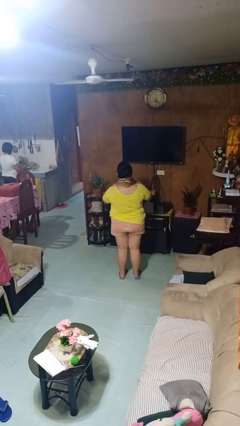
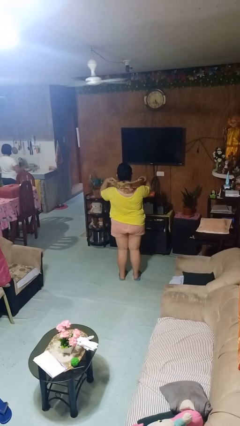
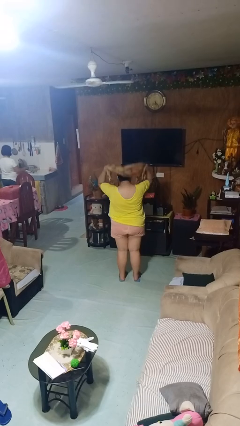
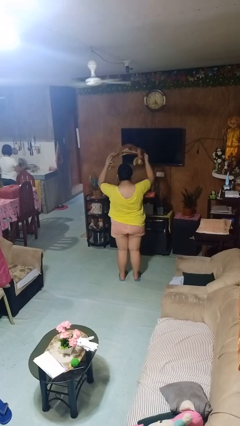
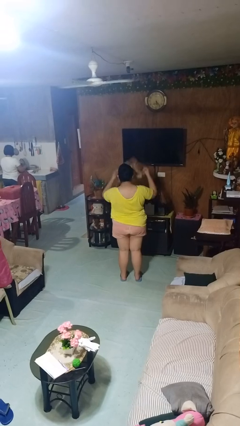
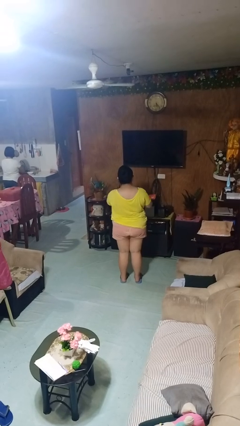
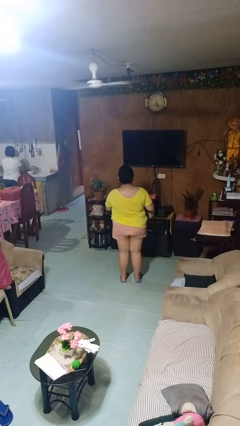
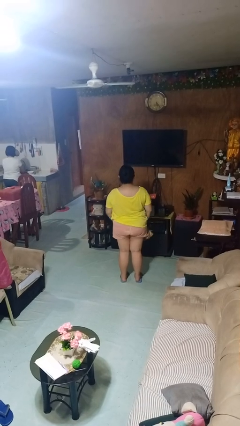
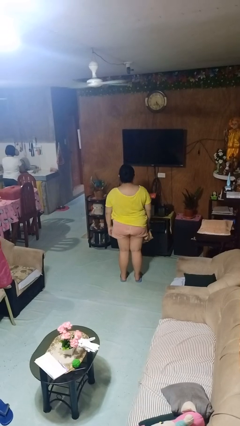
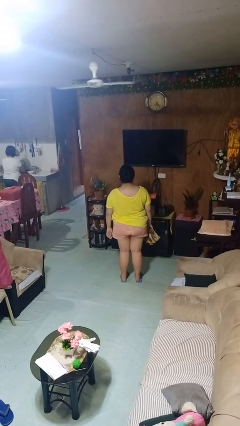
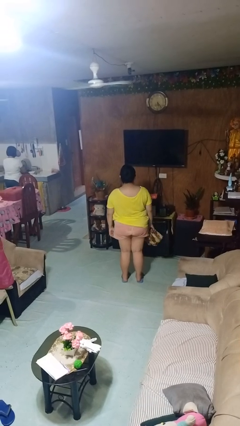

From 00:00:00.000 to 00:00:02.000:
person takes off scarf

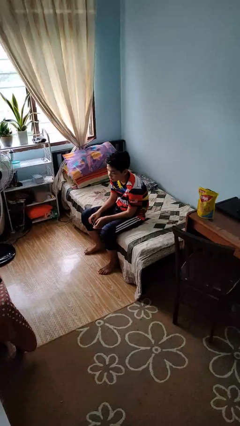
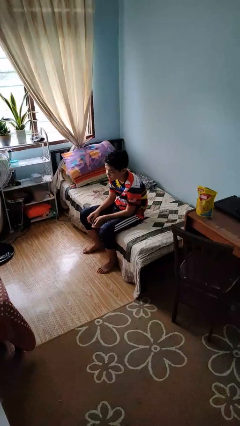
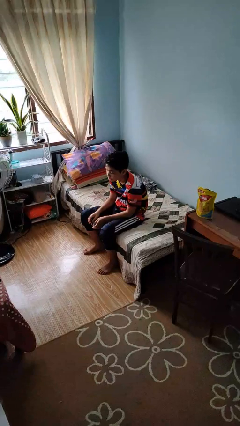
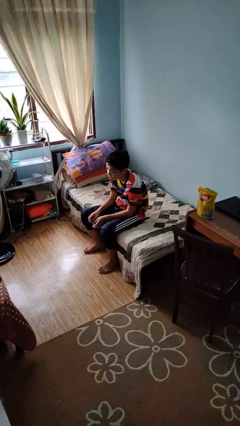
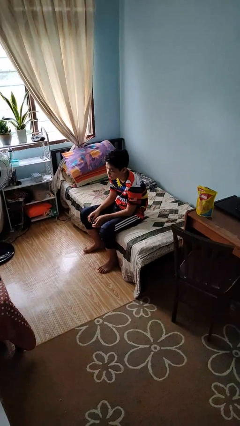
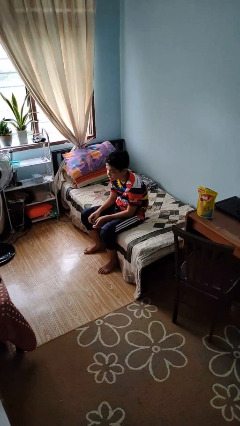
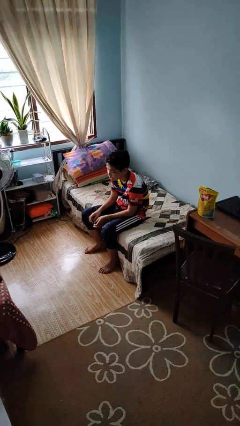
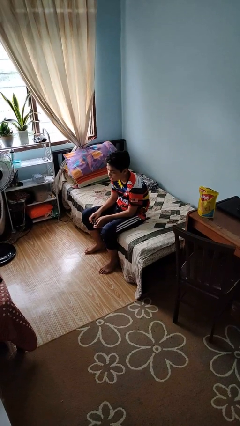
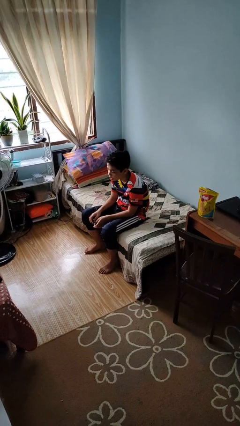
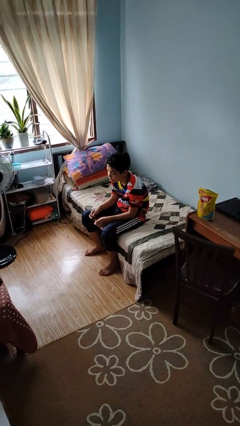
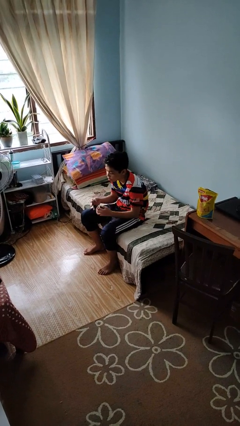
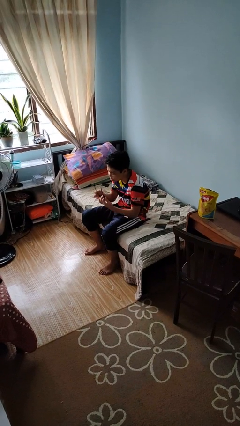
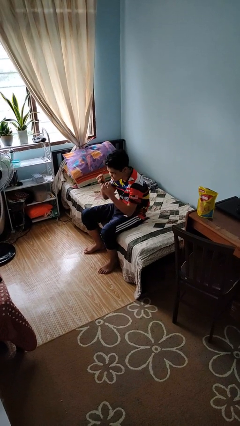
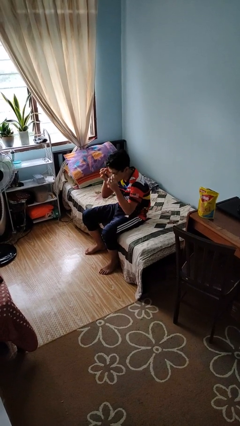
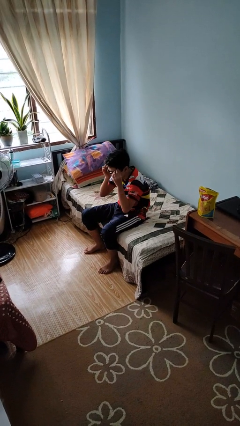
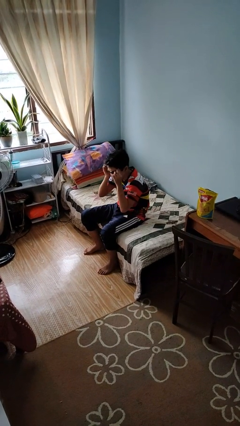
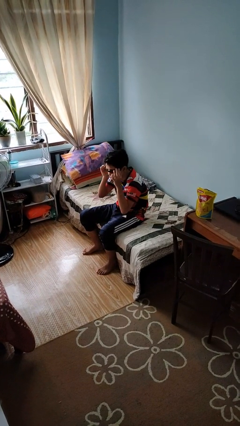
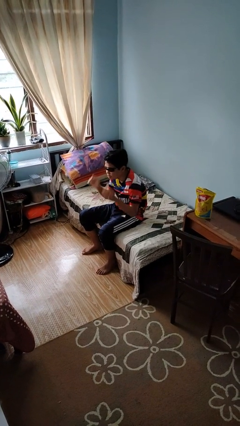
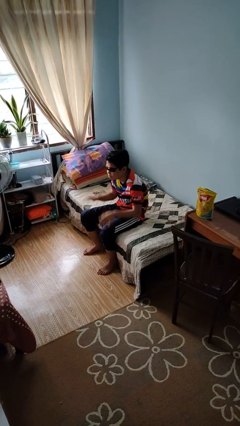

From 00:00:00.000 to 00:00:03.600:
person puts on glasses

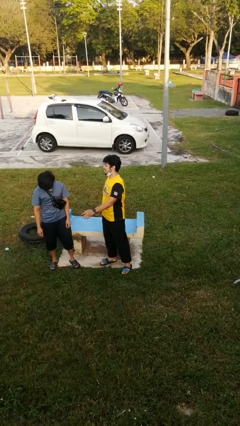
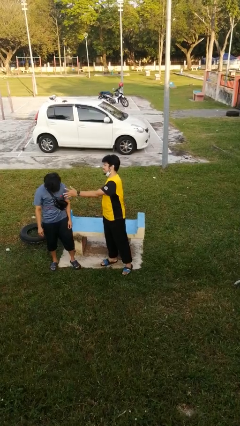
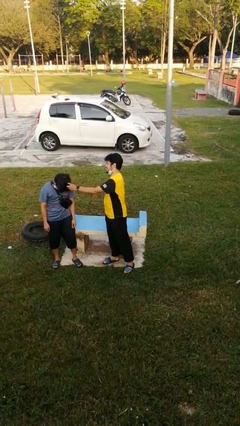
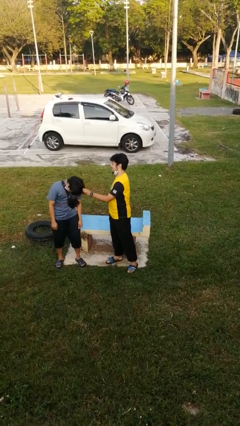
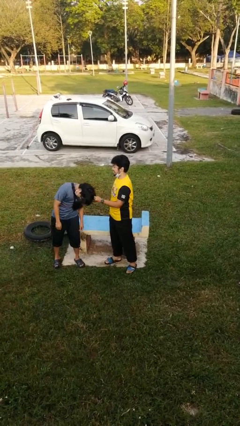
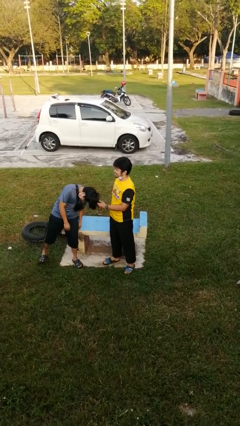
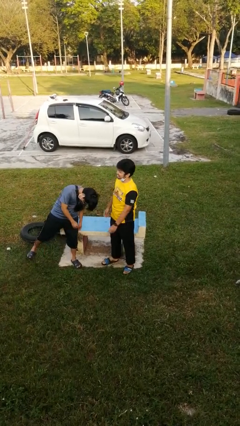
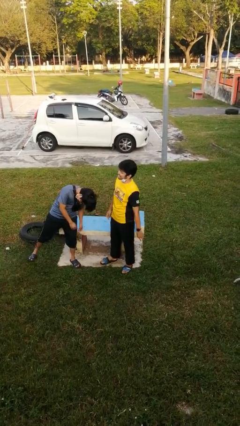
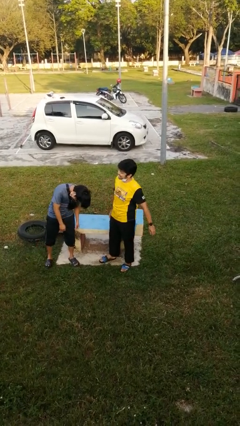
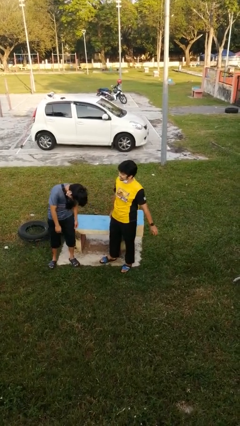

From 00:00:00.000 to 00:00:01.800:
person grabs person by hair

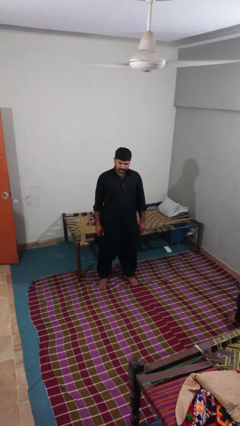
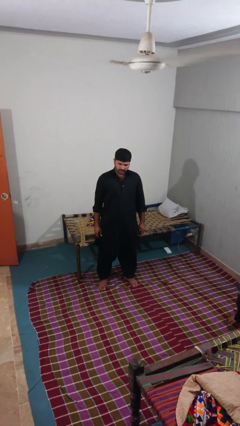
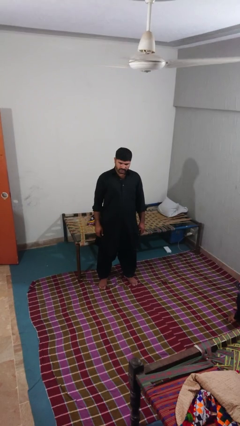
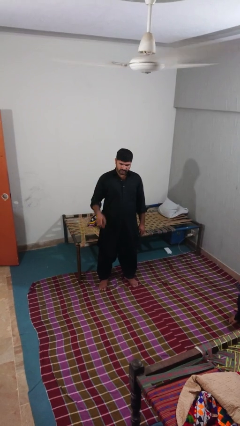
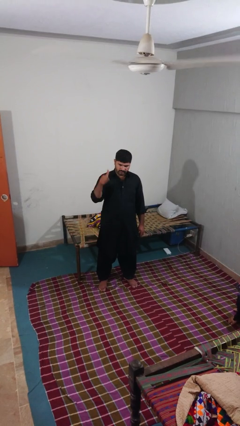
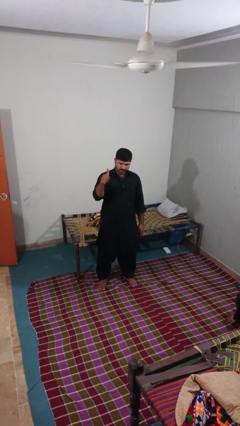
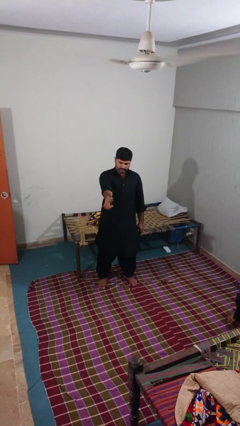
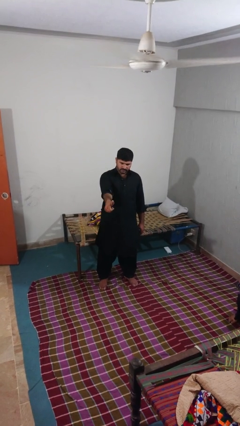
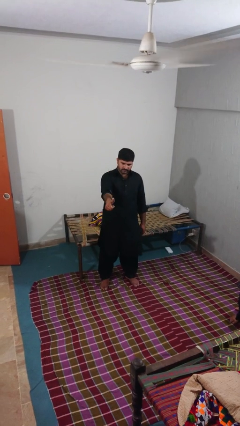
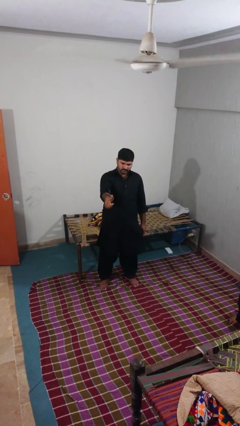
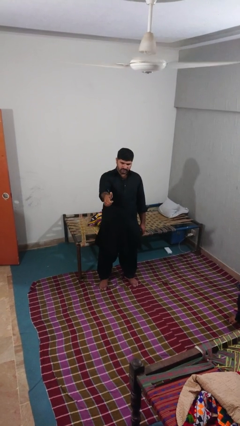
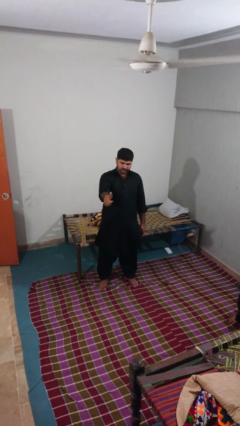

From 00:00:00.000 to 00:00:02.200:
person gestures thumbs up

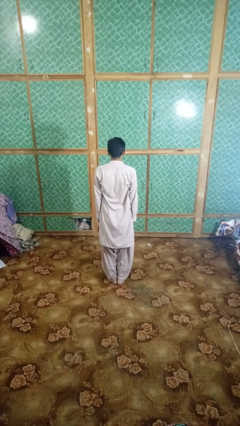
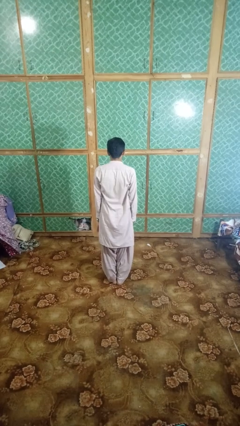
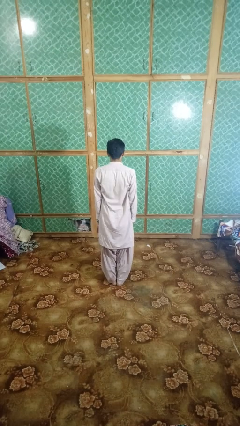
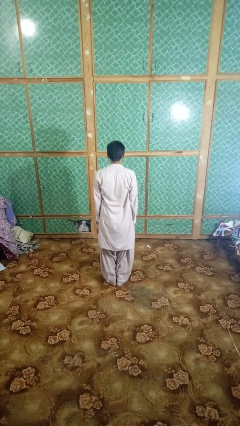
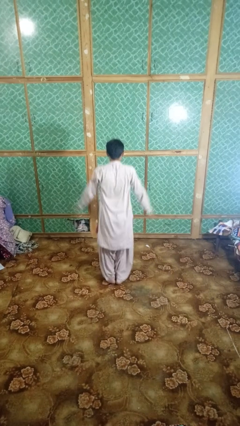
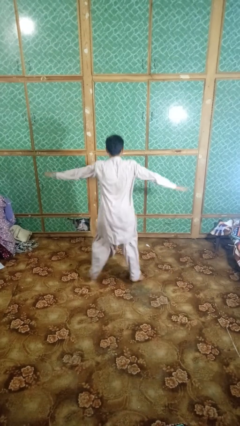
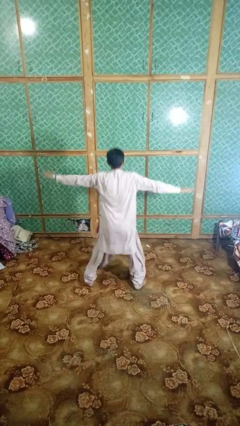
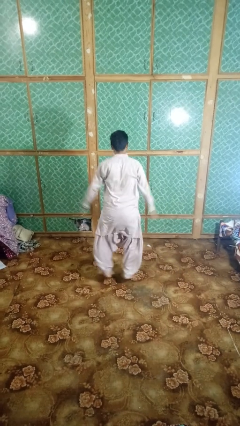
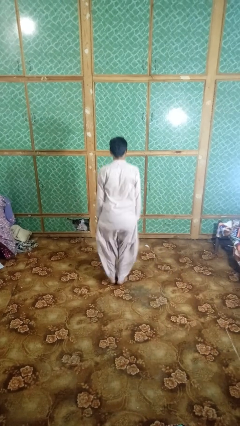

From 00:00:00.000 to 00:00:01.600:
person exercises with jumping jacks

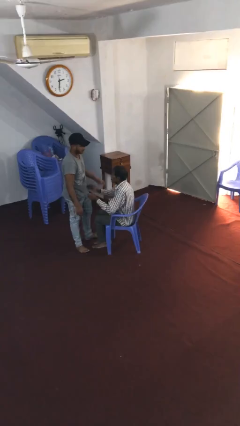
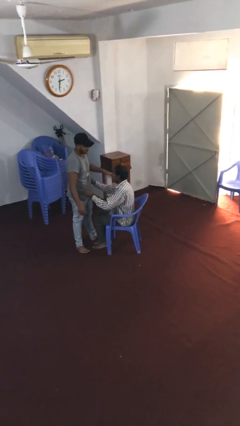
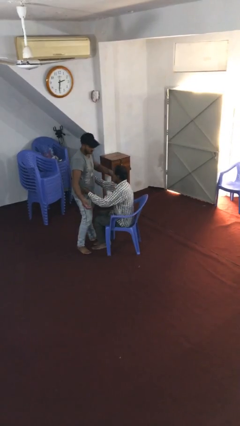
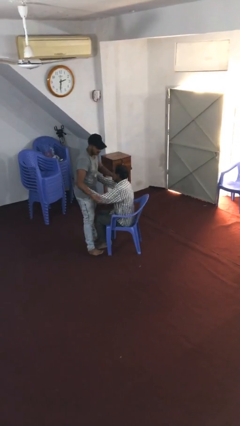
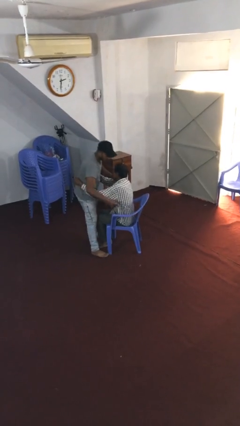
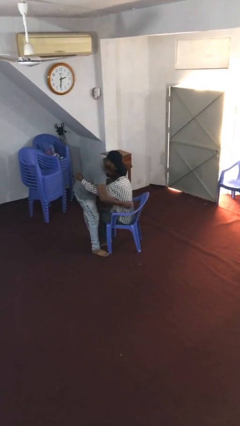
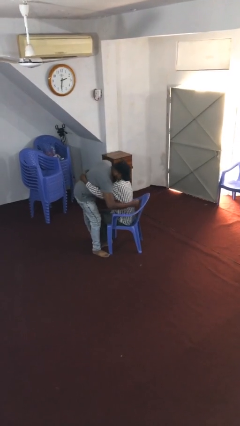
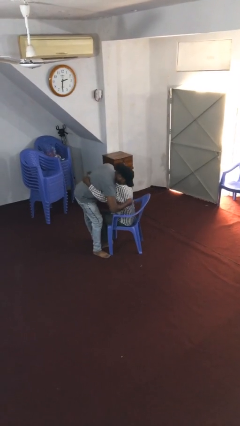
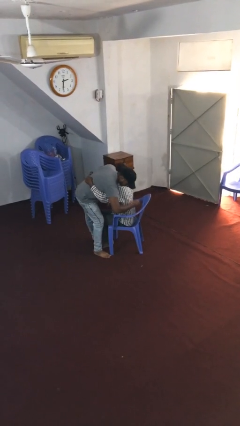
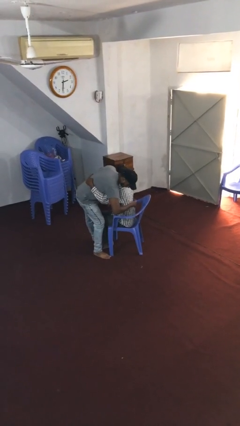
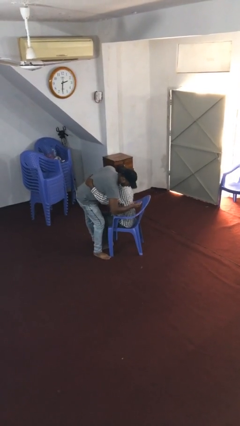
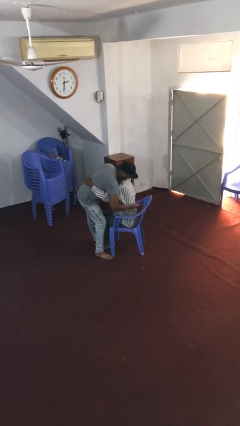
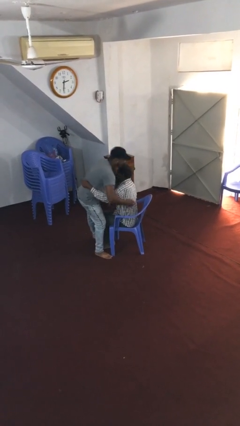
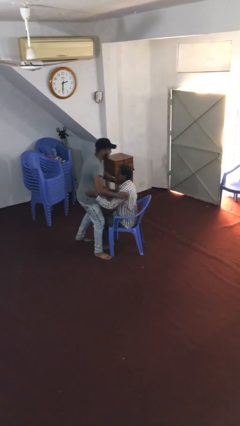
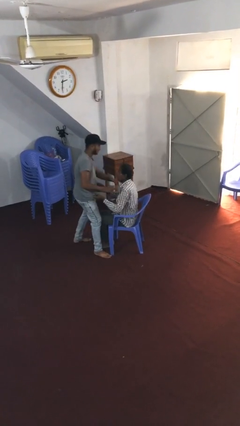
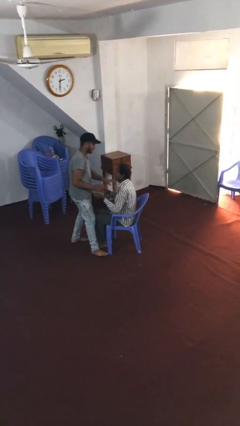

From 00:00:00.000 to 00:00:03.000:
person embraces person

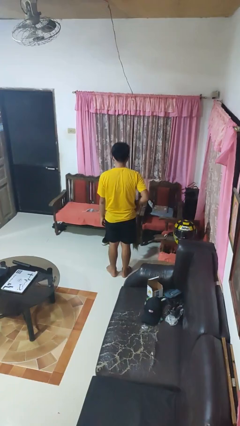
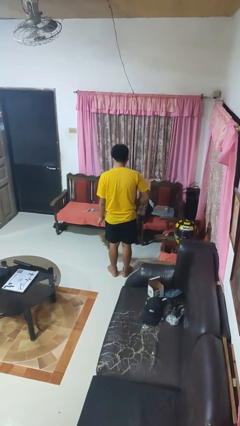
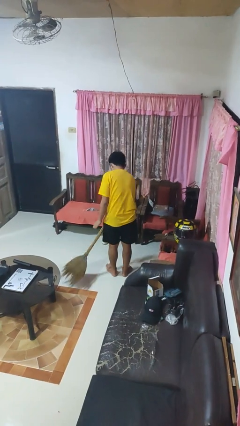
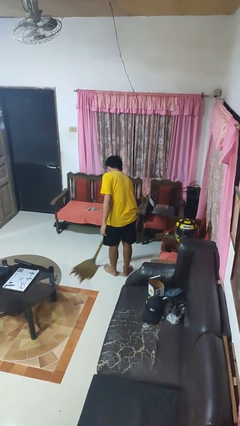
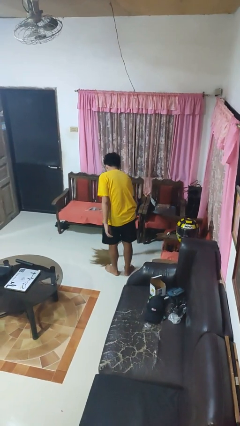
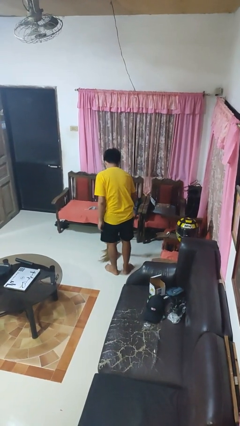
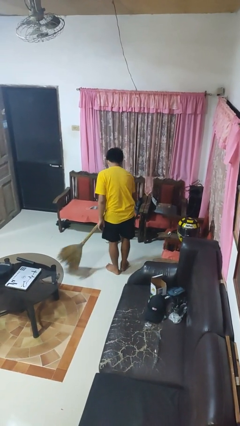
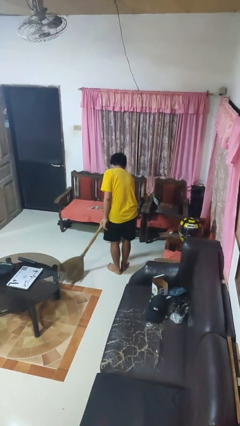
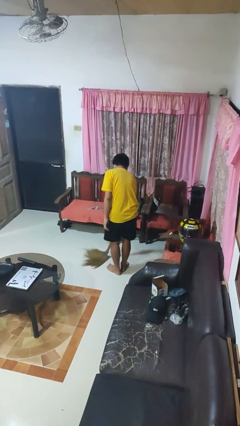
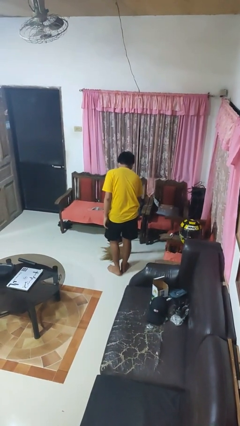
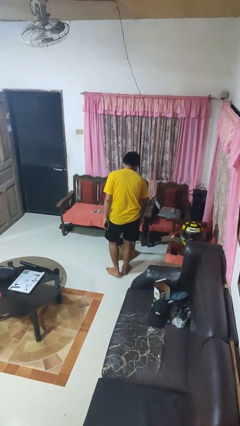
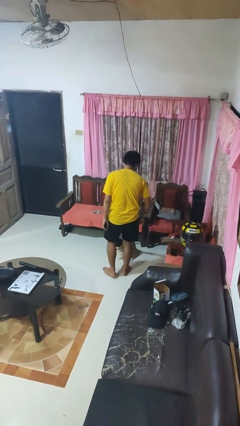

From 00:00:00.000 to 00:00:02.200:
person sweeps floor

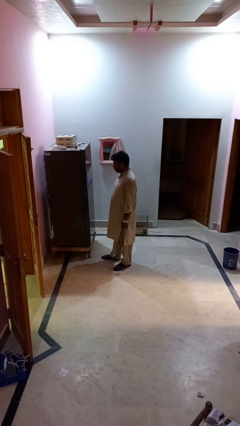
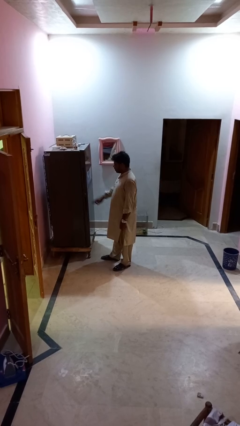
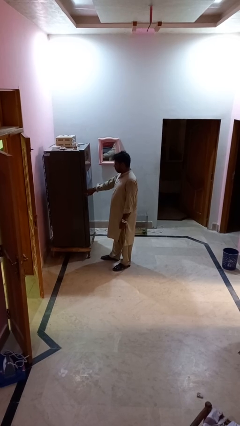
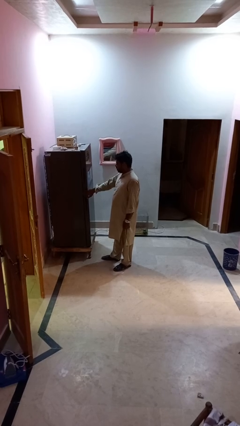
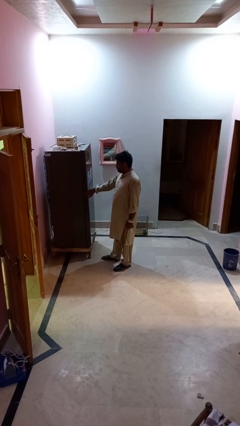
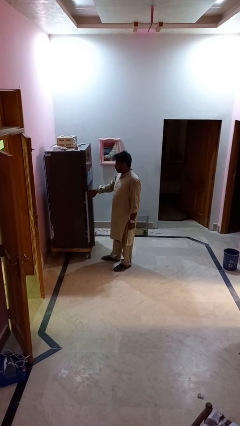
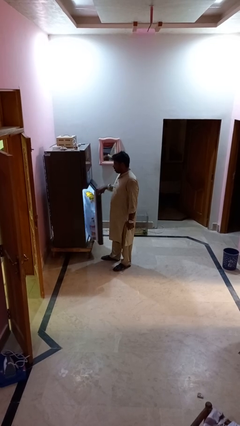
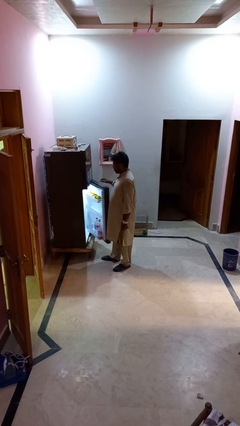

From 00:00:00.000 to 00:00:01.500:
person opens refrigerator
